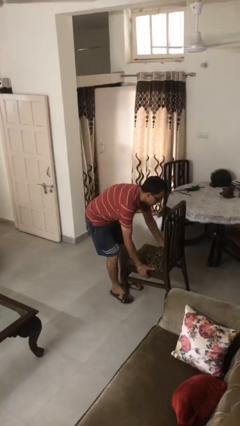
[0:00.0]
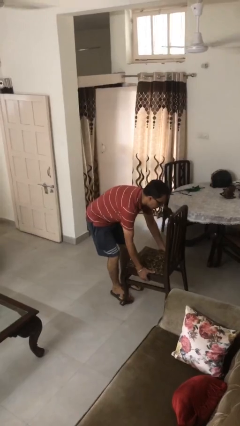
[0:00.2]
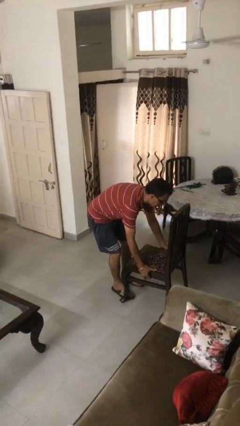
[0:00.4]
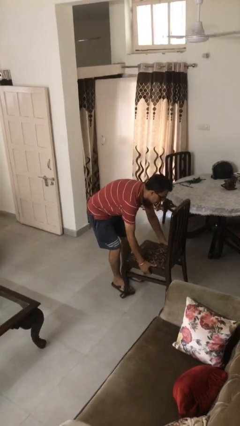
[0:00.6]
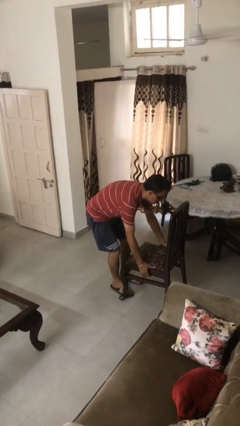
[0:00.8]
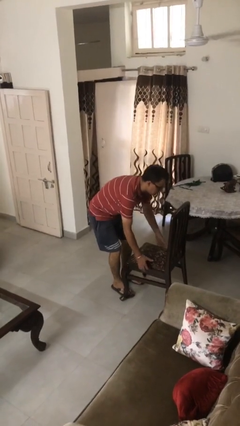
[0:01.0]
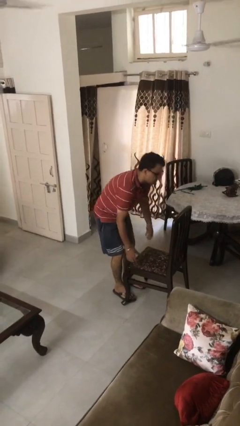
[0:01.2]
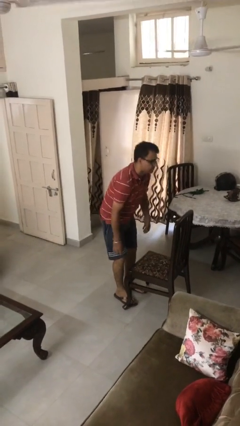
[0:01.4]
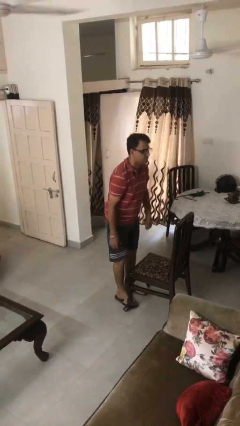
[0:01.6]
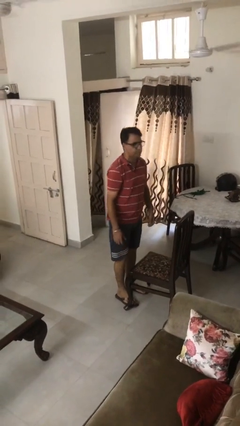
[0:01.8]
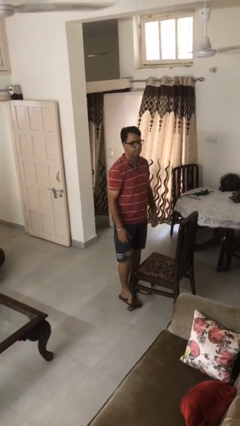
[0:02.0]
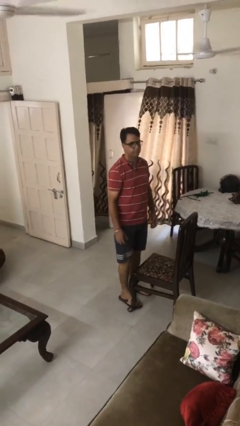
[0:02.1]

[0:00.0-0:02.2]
person puts down object on floor

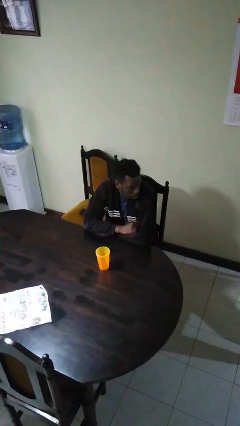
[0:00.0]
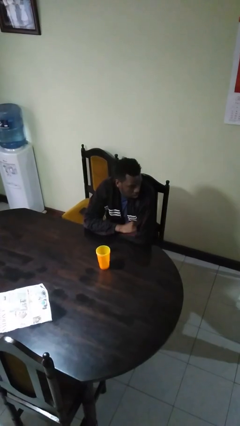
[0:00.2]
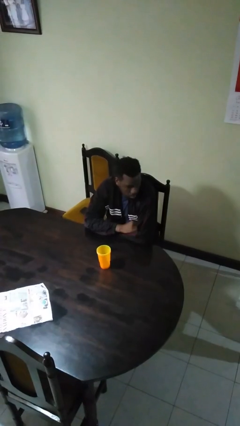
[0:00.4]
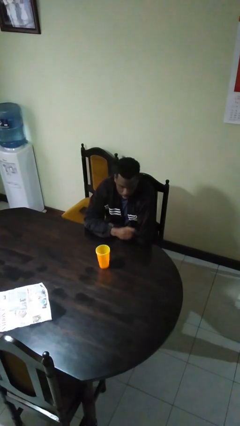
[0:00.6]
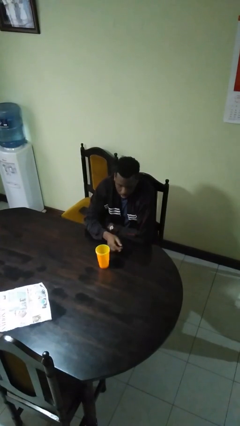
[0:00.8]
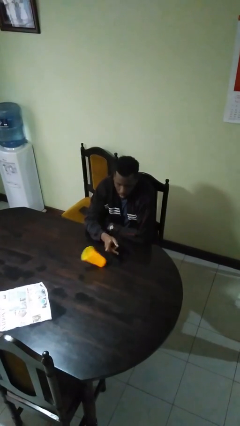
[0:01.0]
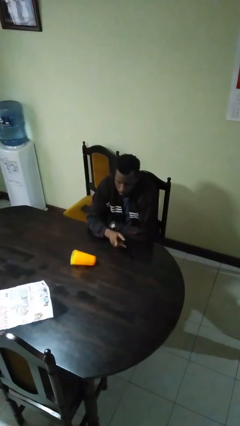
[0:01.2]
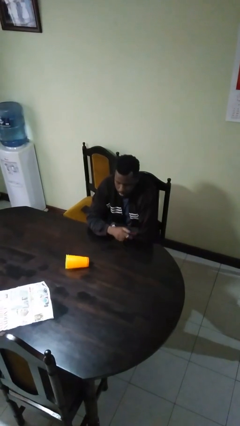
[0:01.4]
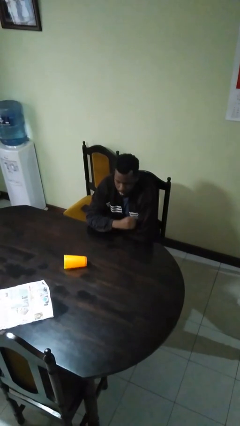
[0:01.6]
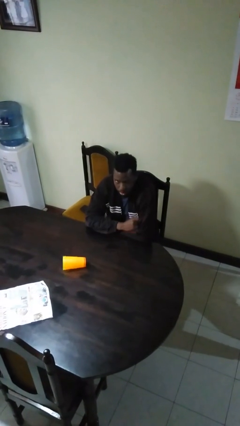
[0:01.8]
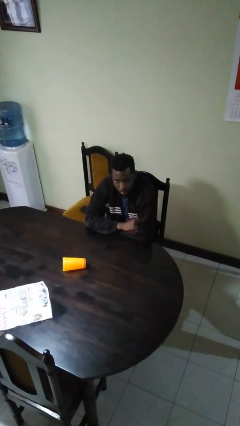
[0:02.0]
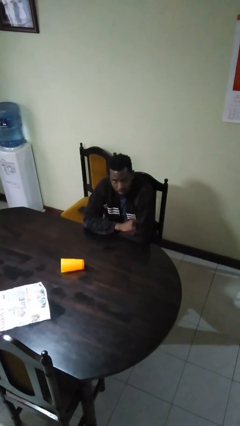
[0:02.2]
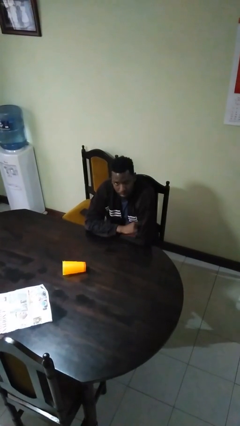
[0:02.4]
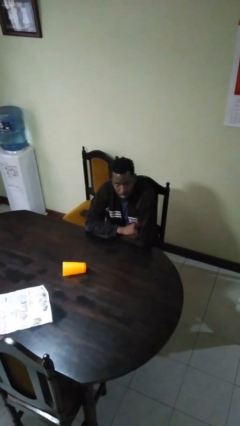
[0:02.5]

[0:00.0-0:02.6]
person knocks over glass

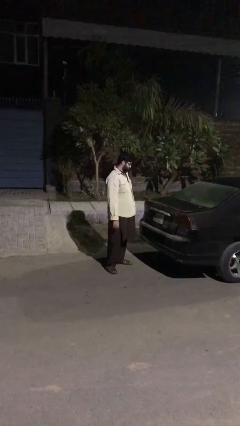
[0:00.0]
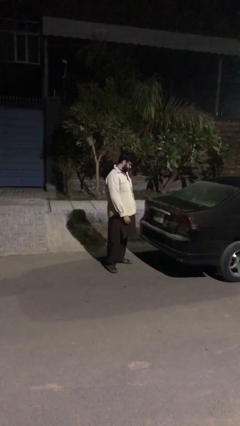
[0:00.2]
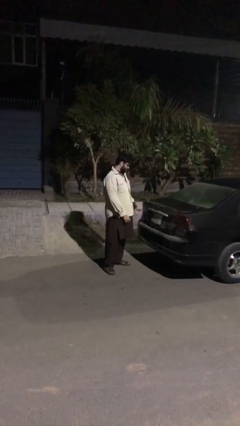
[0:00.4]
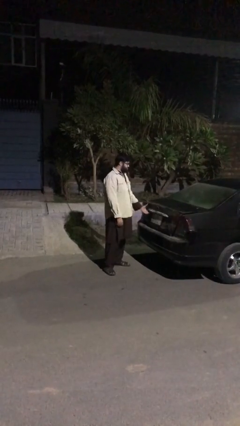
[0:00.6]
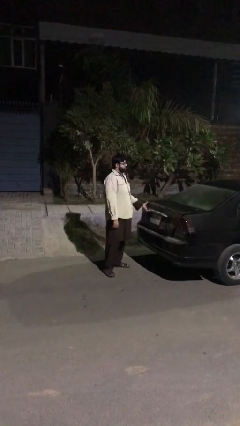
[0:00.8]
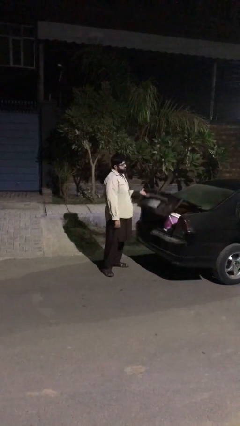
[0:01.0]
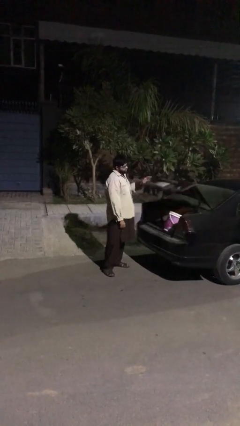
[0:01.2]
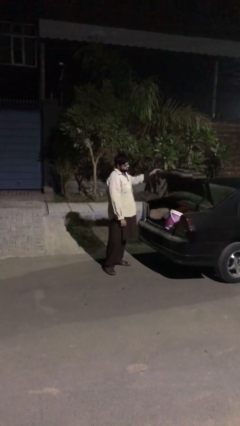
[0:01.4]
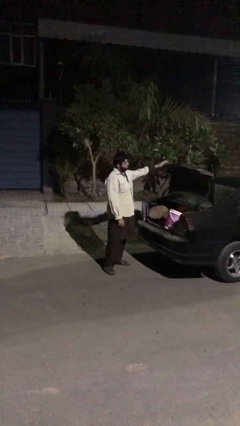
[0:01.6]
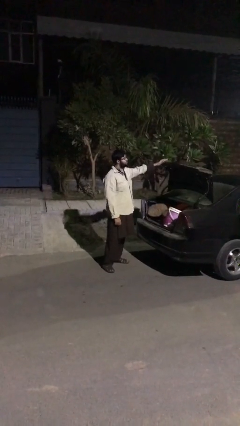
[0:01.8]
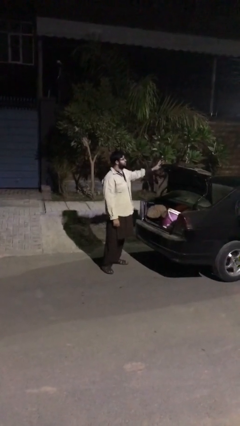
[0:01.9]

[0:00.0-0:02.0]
person opens car trunk

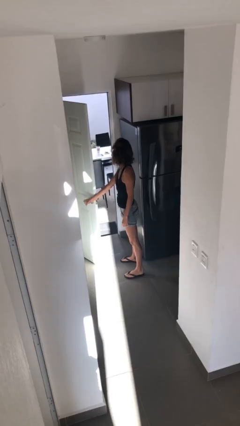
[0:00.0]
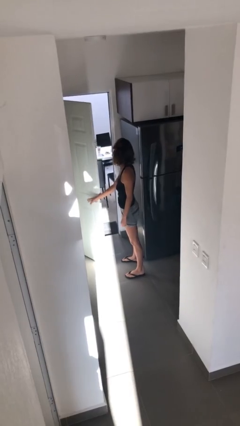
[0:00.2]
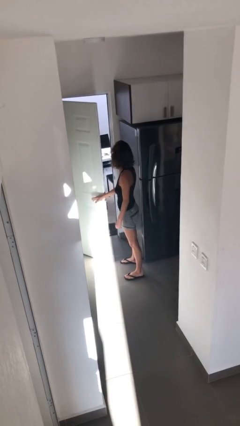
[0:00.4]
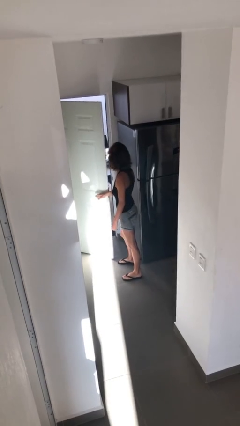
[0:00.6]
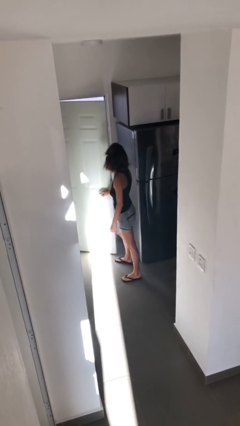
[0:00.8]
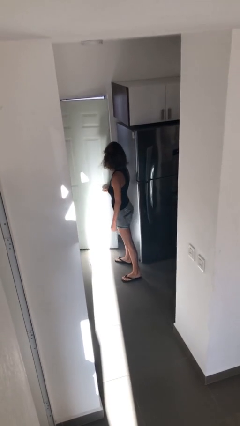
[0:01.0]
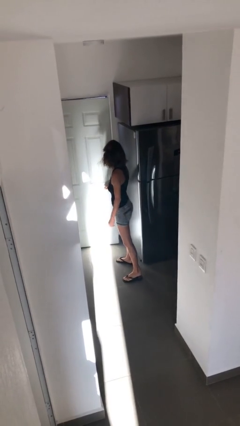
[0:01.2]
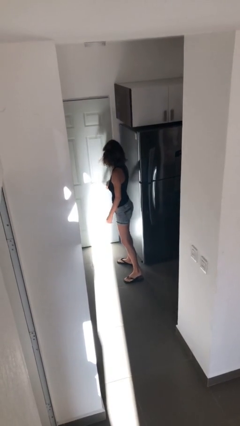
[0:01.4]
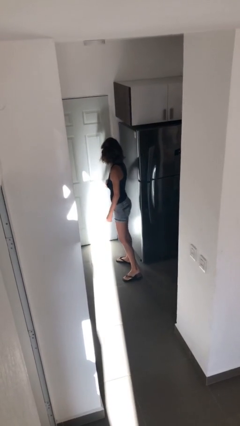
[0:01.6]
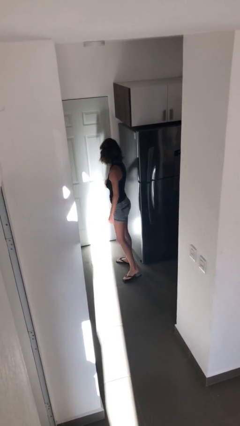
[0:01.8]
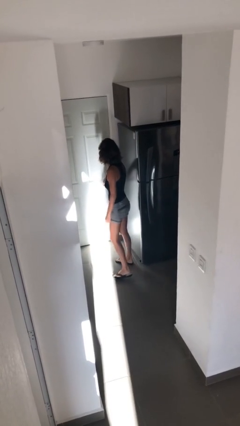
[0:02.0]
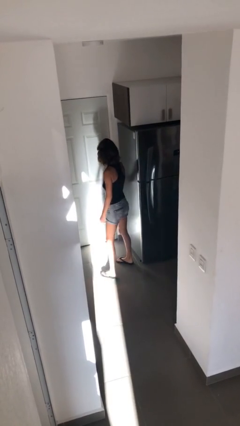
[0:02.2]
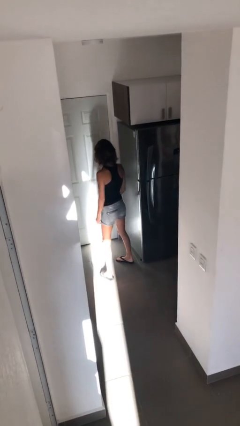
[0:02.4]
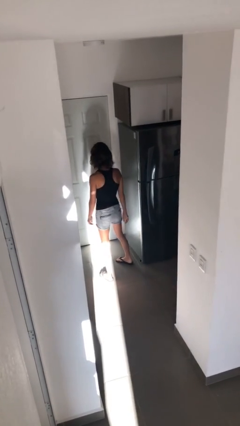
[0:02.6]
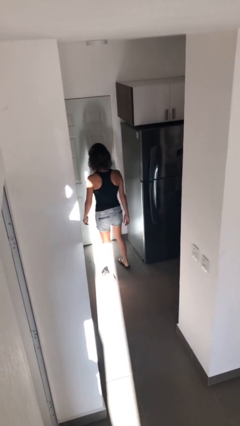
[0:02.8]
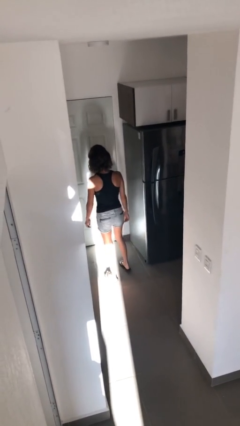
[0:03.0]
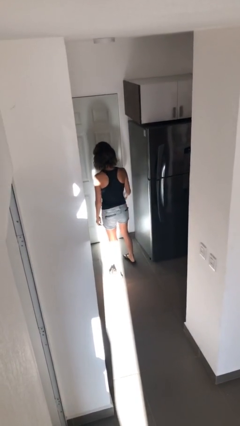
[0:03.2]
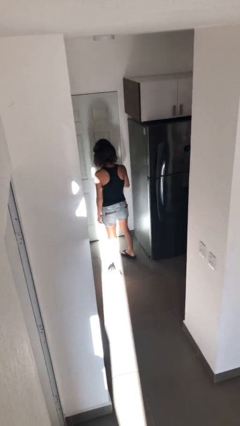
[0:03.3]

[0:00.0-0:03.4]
person closes facility door

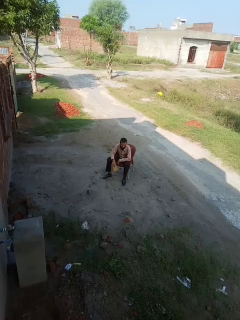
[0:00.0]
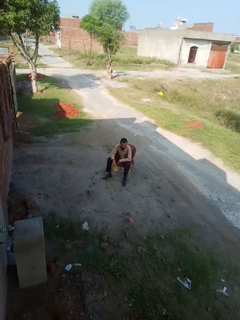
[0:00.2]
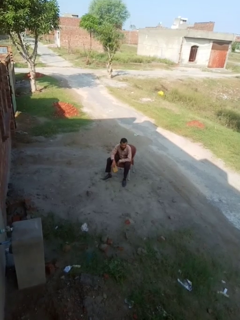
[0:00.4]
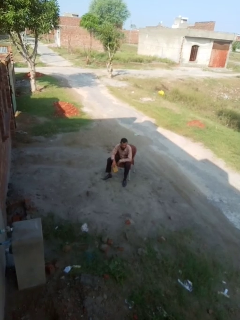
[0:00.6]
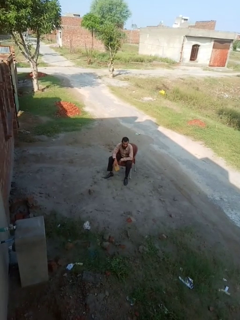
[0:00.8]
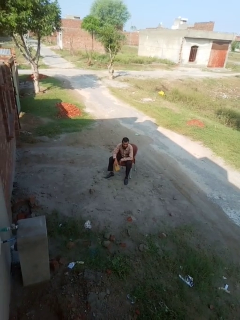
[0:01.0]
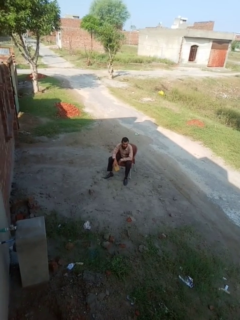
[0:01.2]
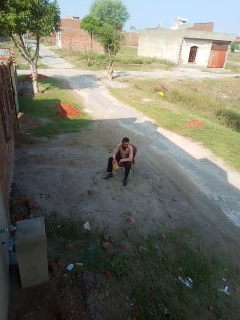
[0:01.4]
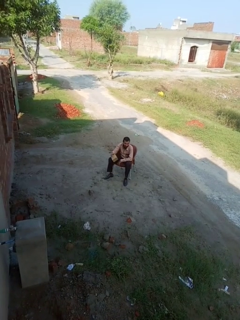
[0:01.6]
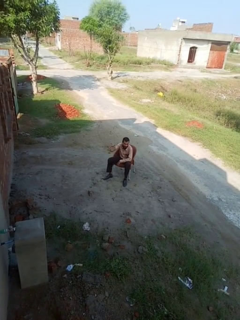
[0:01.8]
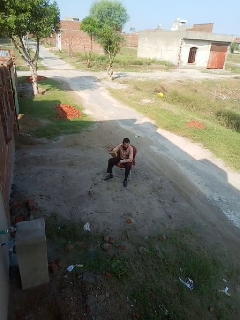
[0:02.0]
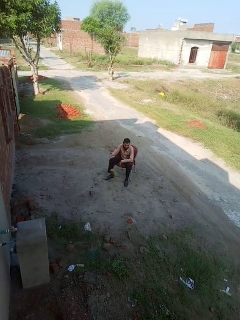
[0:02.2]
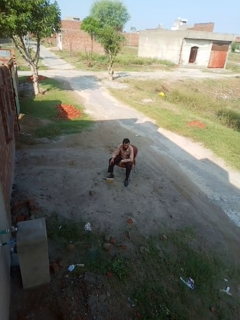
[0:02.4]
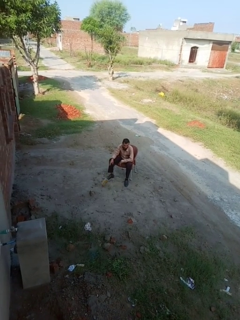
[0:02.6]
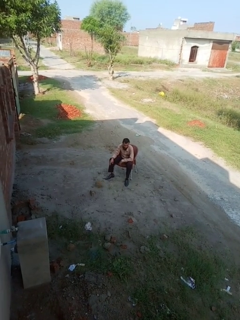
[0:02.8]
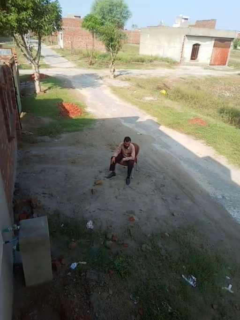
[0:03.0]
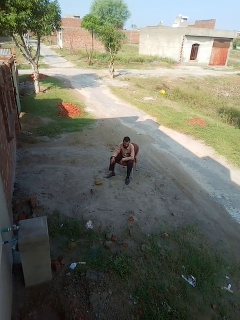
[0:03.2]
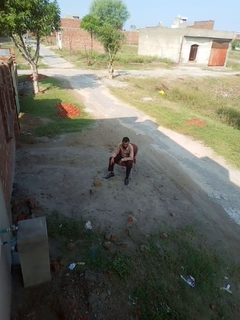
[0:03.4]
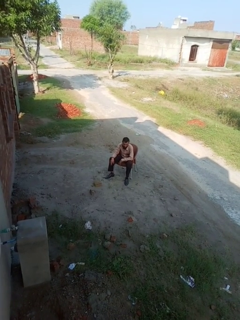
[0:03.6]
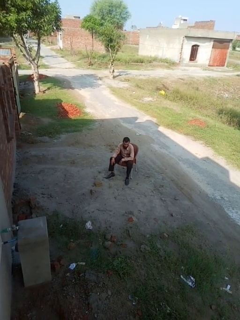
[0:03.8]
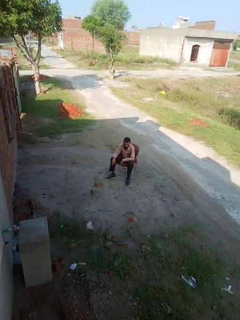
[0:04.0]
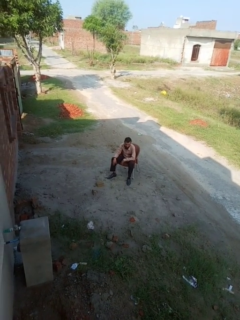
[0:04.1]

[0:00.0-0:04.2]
person throws object into air

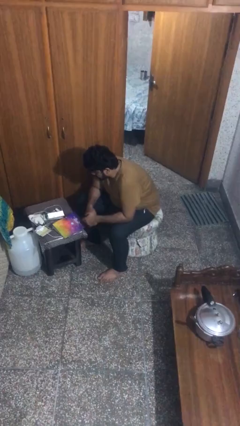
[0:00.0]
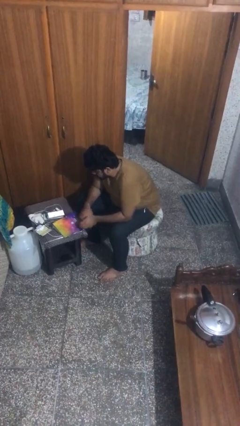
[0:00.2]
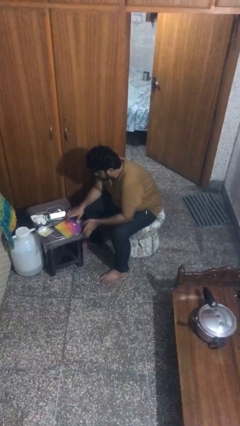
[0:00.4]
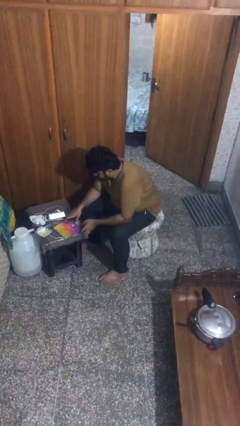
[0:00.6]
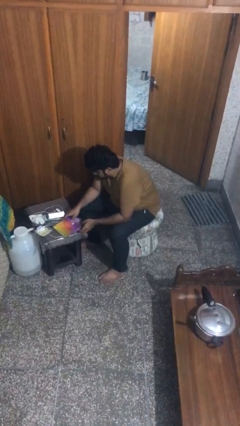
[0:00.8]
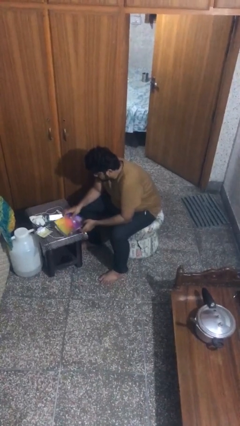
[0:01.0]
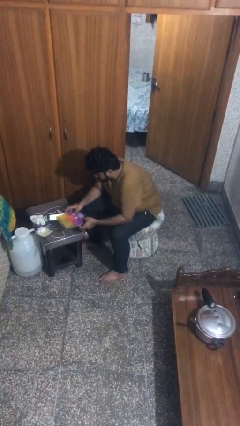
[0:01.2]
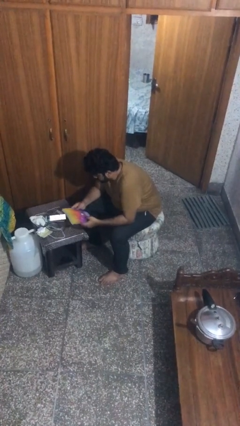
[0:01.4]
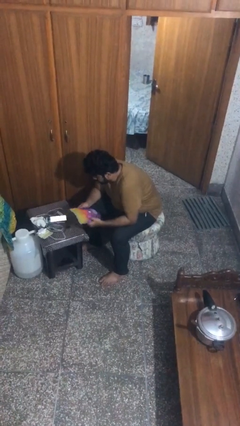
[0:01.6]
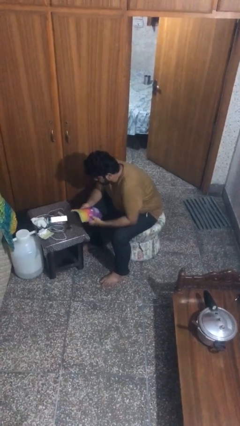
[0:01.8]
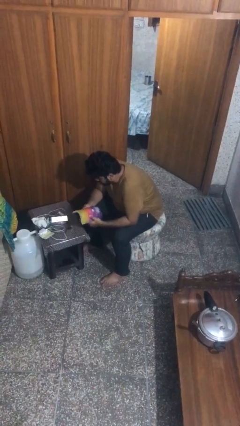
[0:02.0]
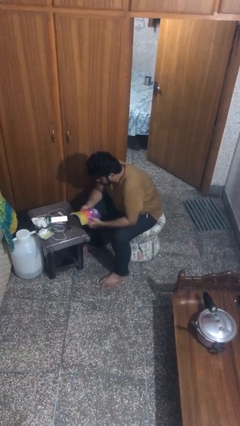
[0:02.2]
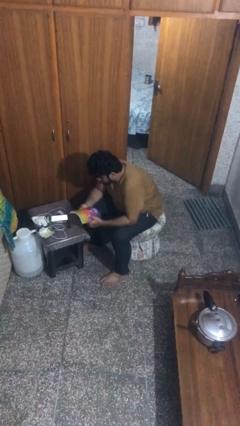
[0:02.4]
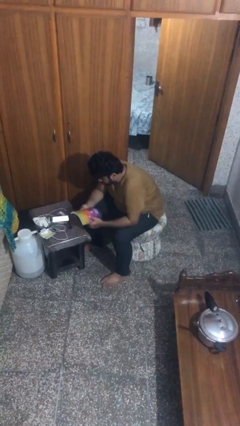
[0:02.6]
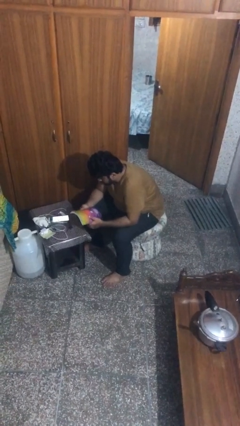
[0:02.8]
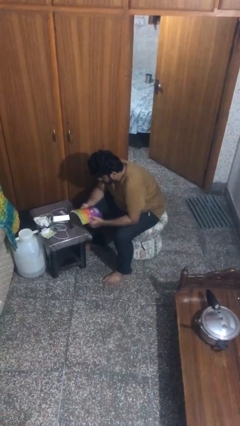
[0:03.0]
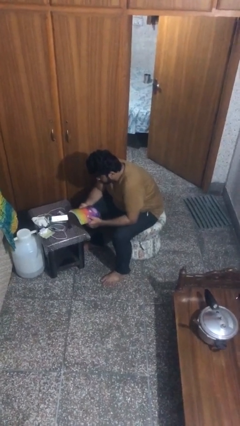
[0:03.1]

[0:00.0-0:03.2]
person picks up object from table

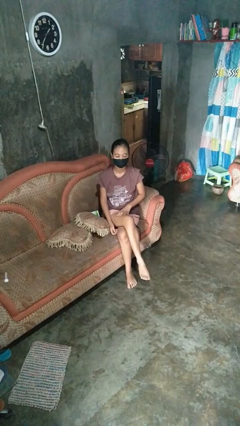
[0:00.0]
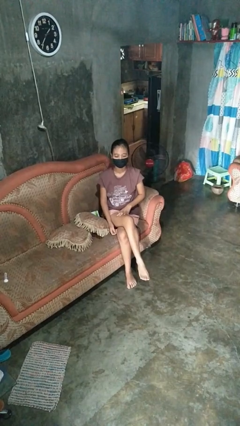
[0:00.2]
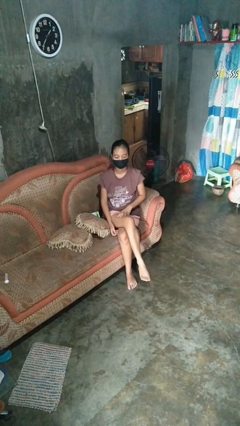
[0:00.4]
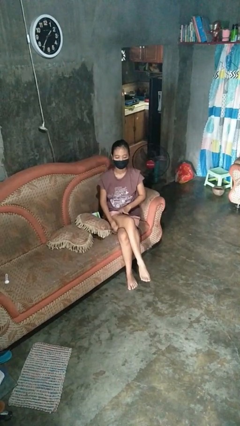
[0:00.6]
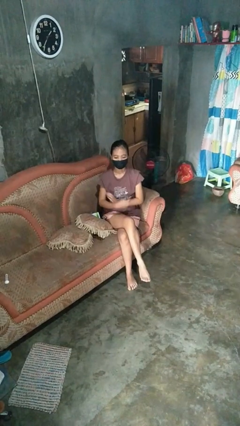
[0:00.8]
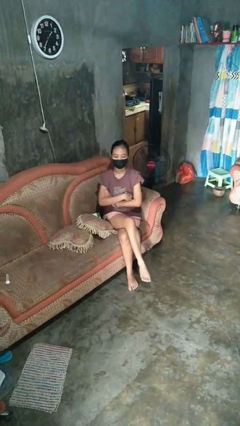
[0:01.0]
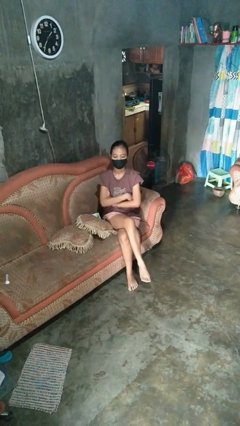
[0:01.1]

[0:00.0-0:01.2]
person crosses arms
